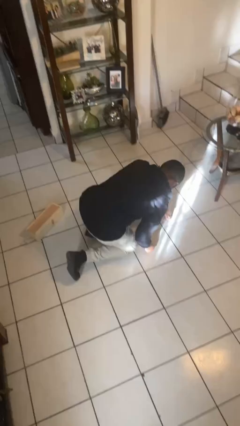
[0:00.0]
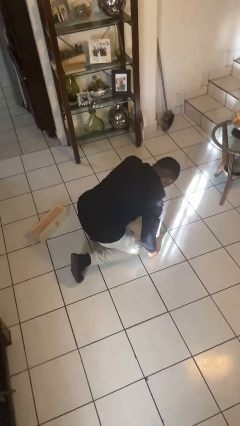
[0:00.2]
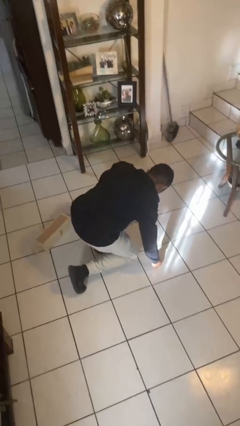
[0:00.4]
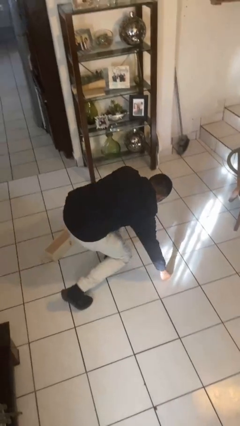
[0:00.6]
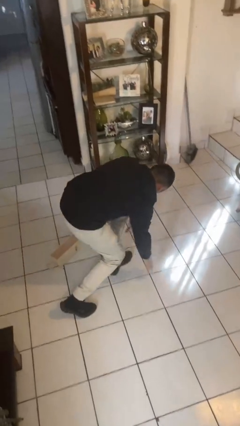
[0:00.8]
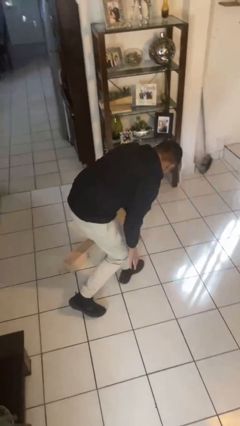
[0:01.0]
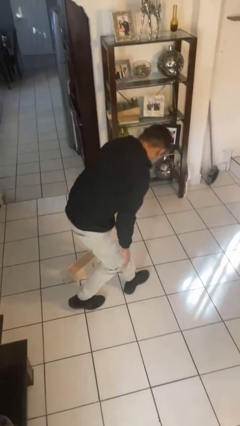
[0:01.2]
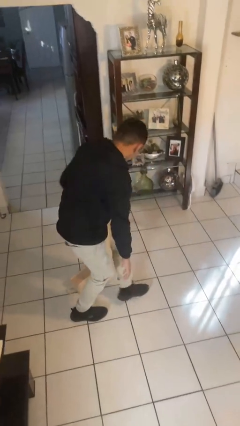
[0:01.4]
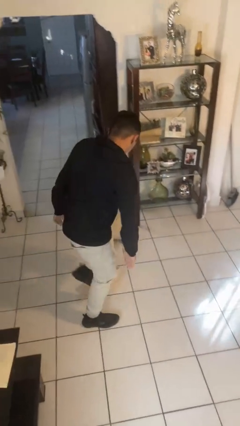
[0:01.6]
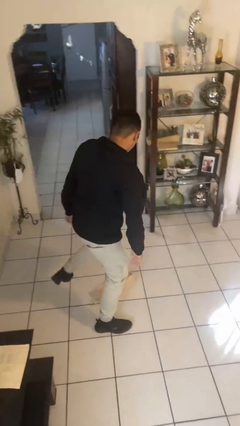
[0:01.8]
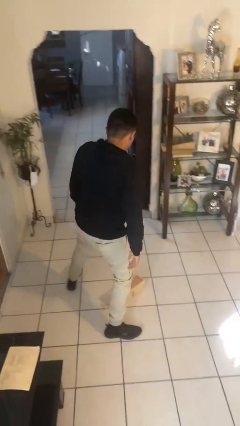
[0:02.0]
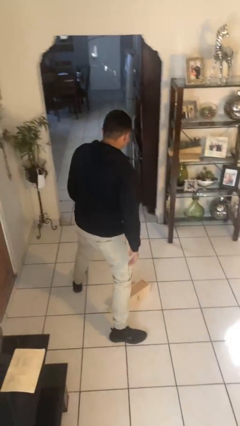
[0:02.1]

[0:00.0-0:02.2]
person stands up from floor

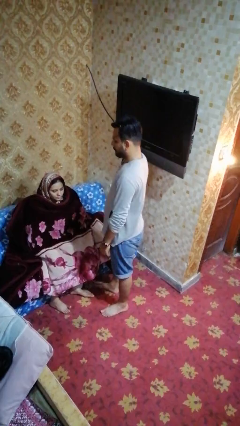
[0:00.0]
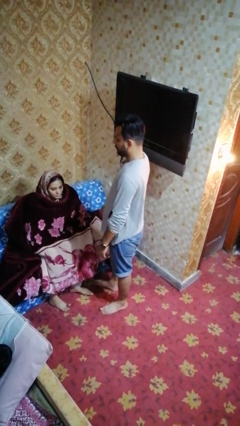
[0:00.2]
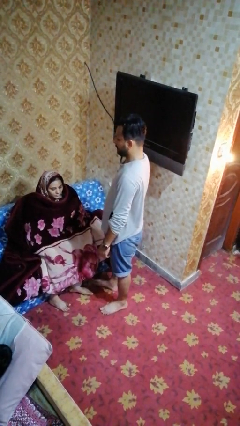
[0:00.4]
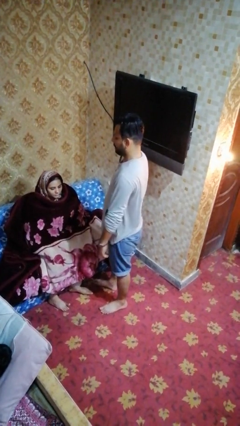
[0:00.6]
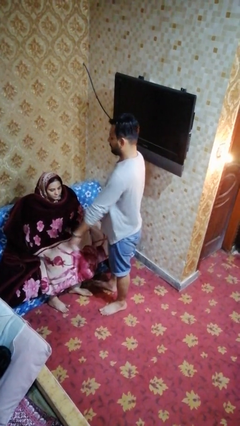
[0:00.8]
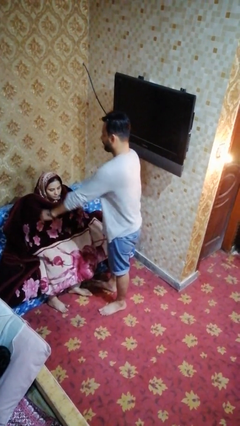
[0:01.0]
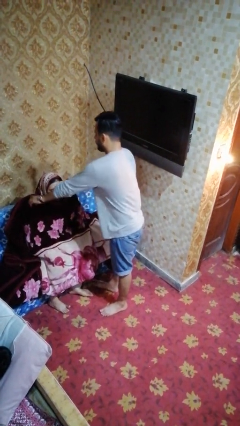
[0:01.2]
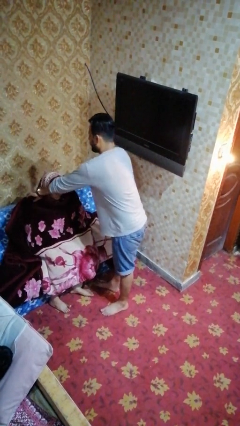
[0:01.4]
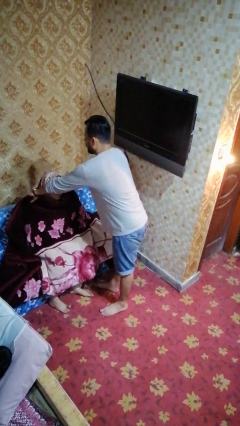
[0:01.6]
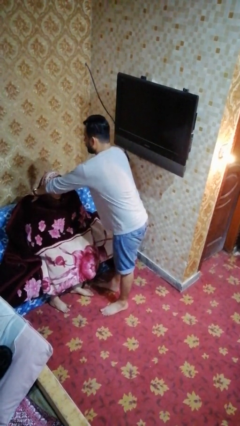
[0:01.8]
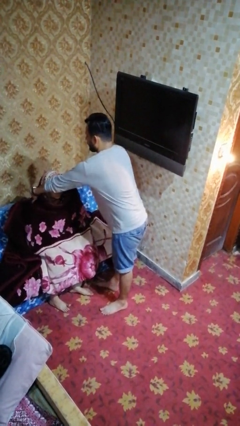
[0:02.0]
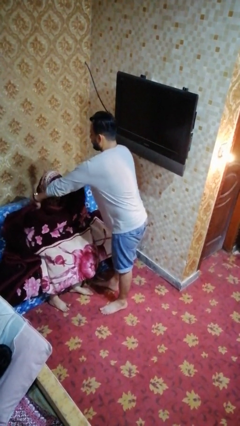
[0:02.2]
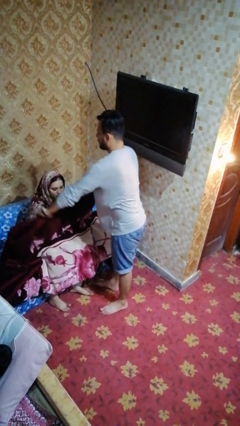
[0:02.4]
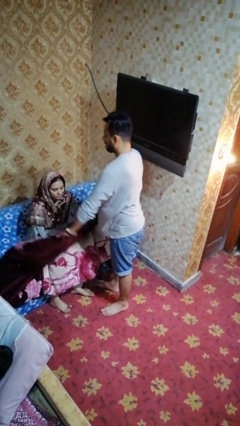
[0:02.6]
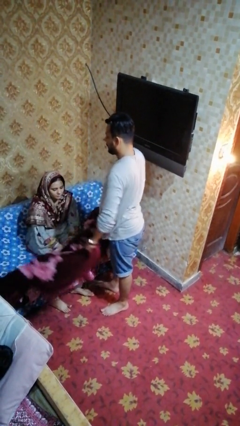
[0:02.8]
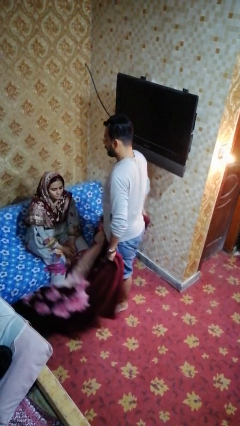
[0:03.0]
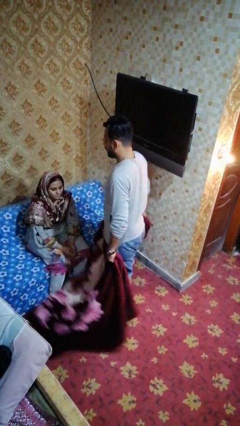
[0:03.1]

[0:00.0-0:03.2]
person uncovers friend with blanket

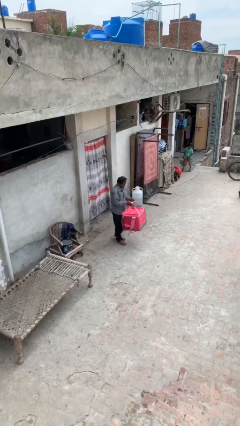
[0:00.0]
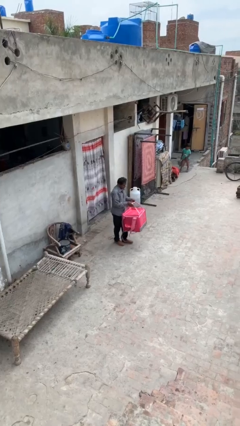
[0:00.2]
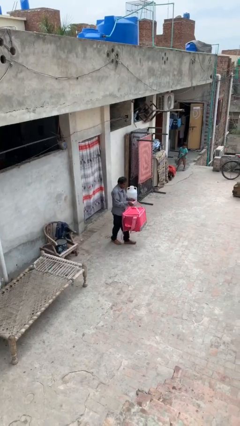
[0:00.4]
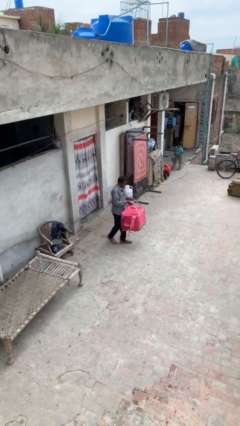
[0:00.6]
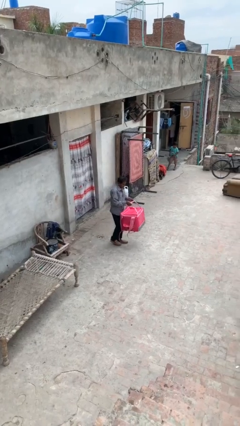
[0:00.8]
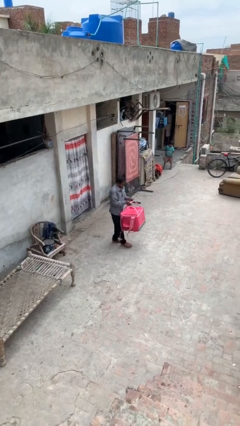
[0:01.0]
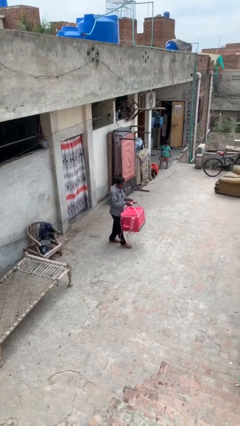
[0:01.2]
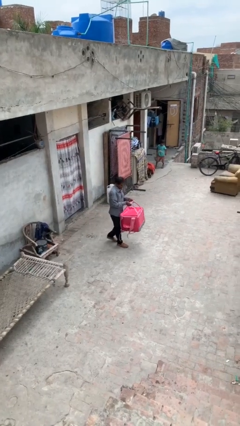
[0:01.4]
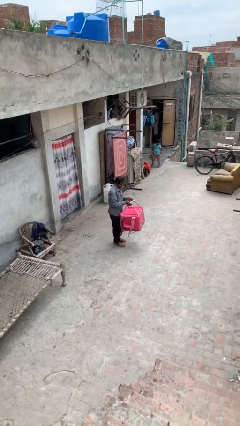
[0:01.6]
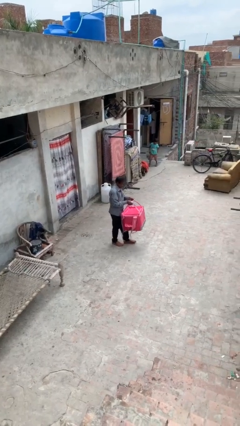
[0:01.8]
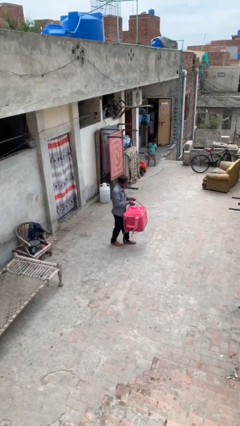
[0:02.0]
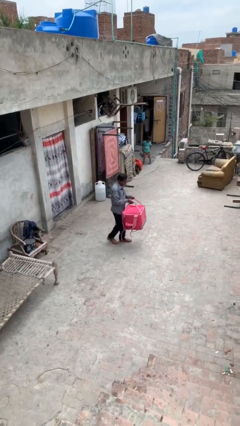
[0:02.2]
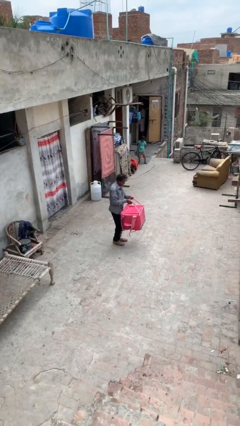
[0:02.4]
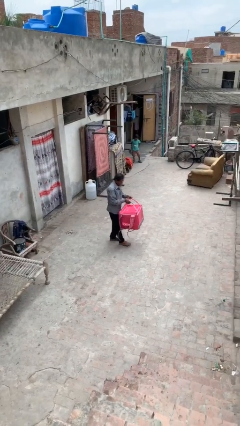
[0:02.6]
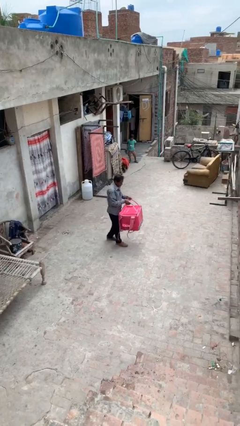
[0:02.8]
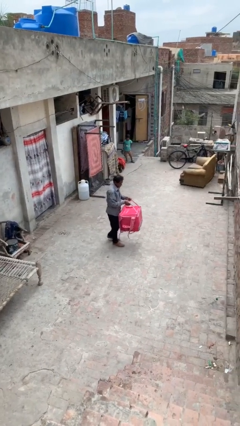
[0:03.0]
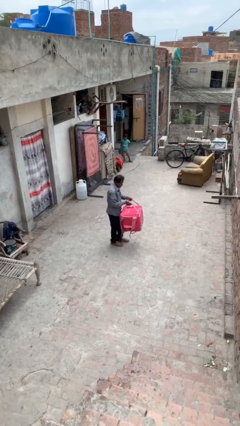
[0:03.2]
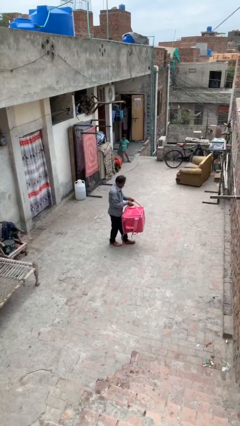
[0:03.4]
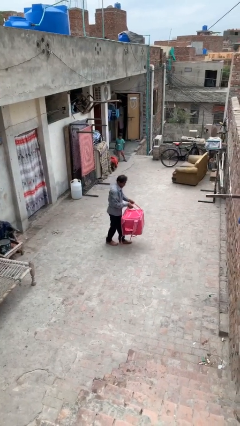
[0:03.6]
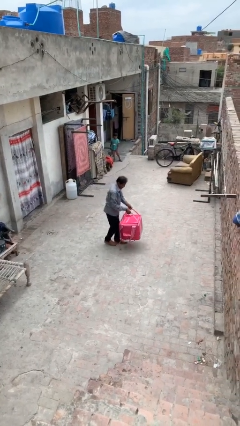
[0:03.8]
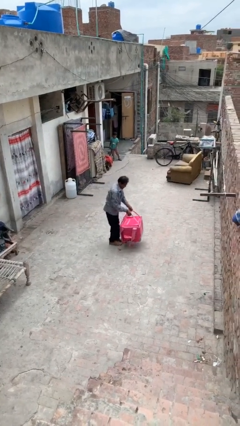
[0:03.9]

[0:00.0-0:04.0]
person carries heavy object

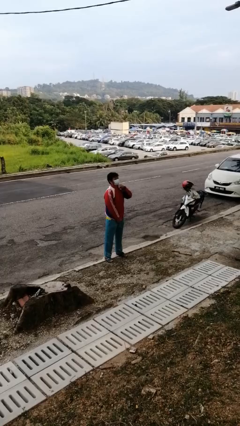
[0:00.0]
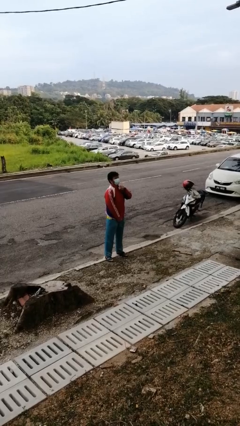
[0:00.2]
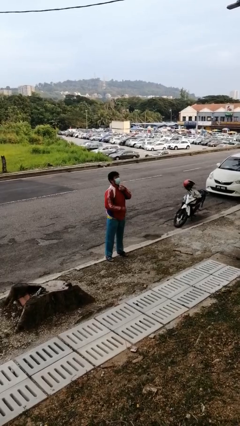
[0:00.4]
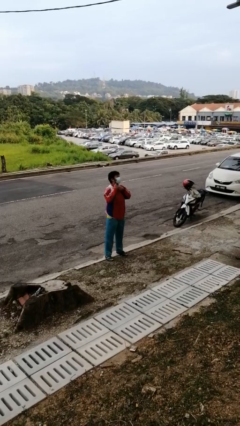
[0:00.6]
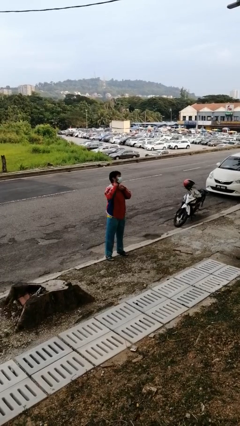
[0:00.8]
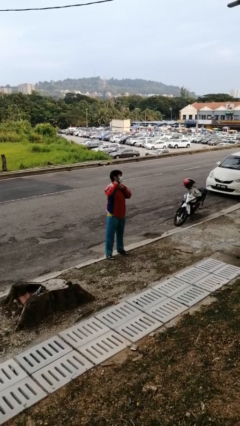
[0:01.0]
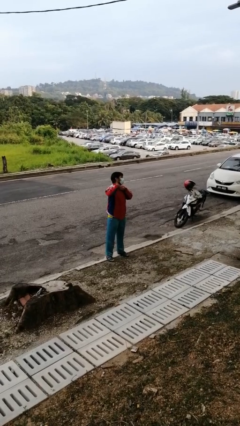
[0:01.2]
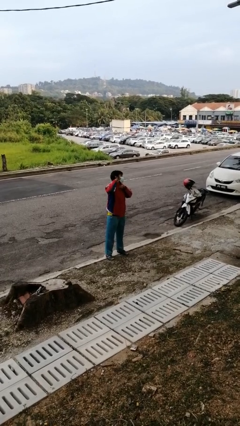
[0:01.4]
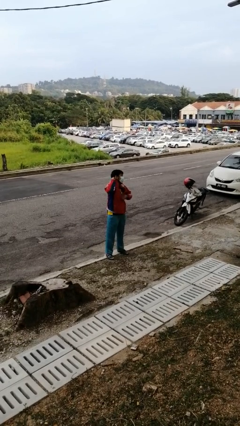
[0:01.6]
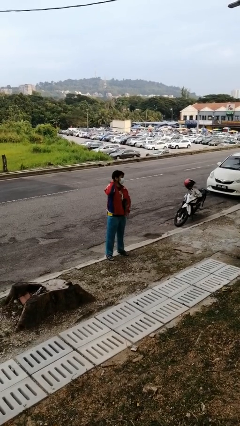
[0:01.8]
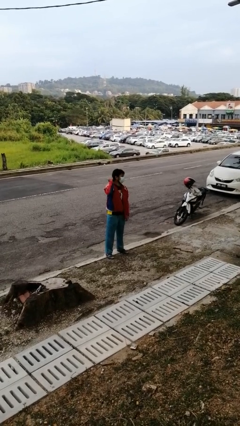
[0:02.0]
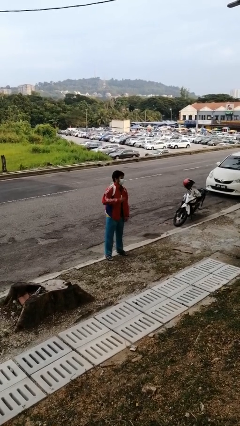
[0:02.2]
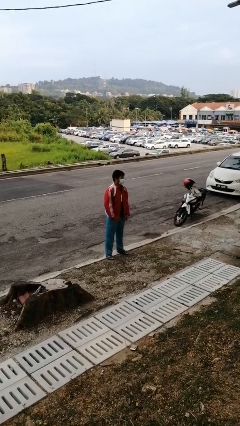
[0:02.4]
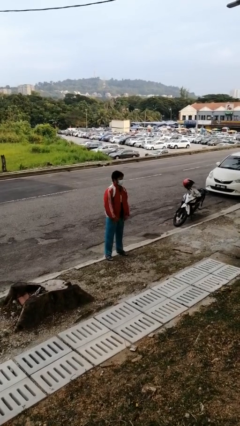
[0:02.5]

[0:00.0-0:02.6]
person unzips jacket

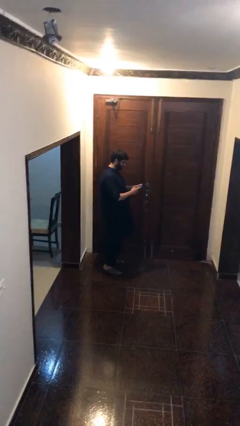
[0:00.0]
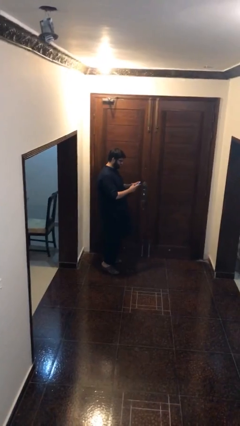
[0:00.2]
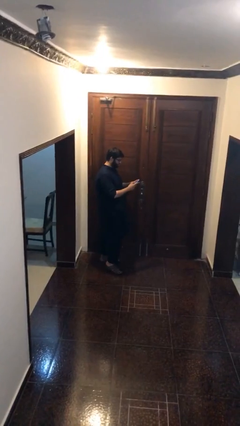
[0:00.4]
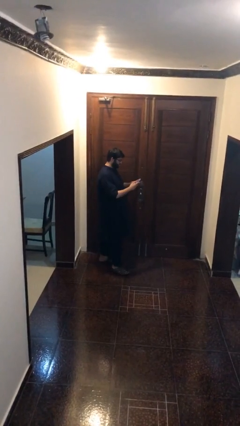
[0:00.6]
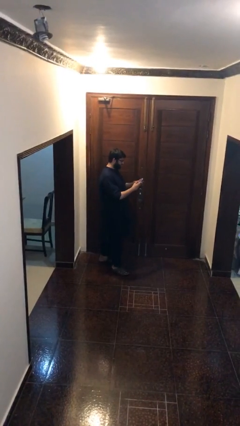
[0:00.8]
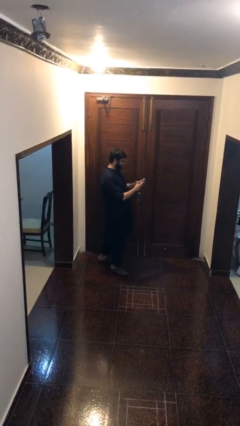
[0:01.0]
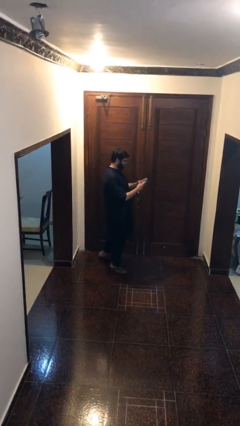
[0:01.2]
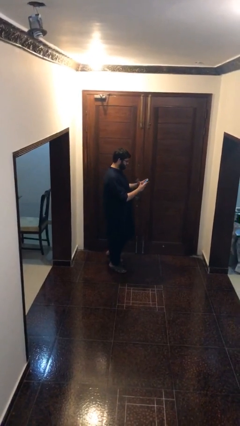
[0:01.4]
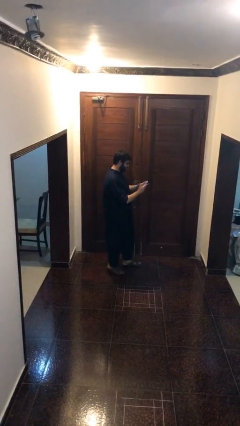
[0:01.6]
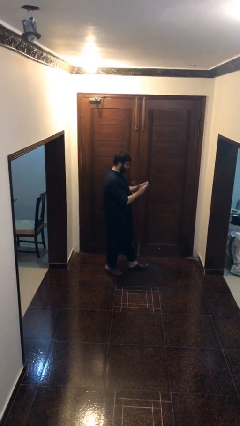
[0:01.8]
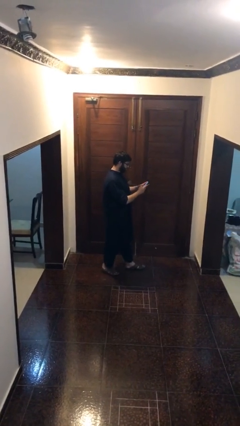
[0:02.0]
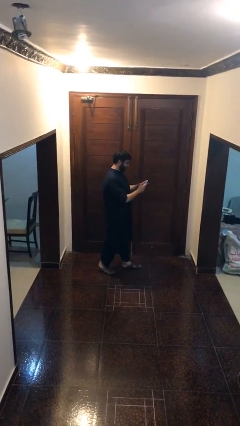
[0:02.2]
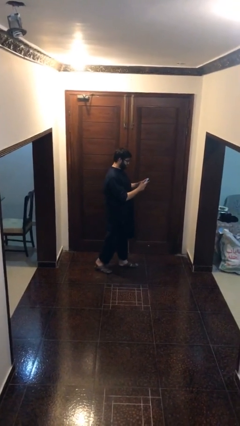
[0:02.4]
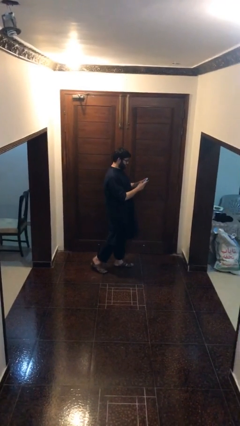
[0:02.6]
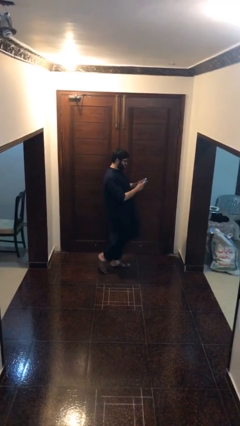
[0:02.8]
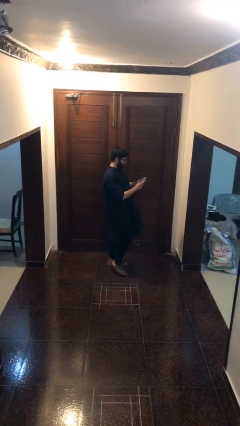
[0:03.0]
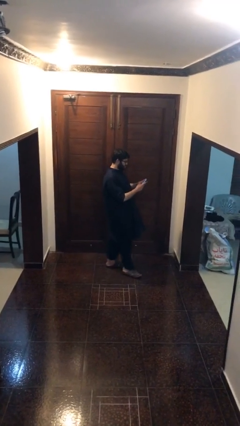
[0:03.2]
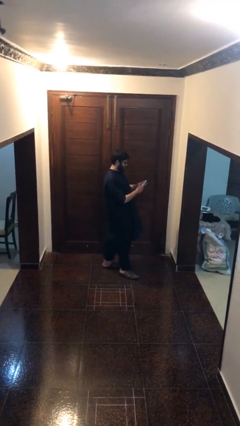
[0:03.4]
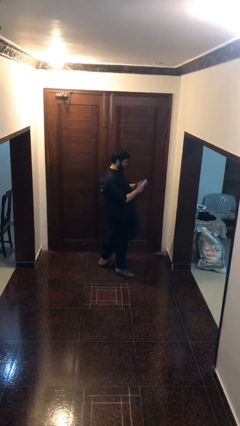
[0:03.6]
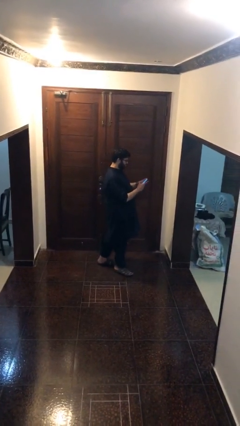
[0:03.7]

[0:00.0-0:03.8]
person texts on phone

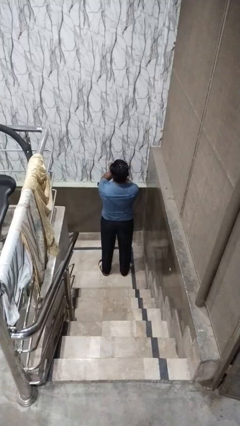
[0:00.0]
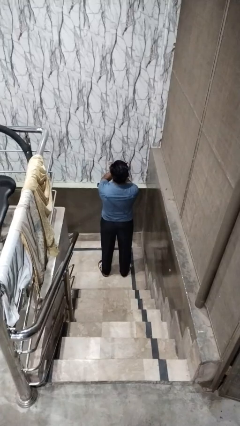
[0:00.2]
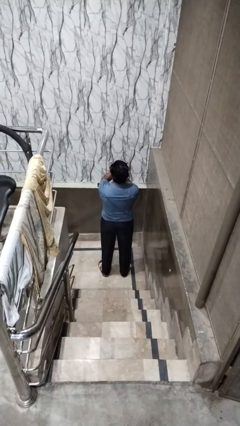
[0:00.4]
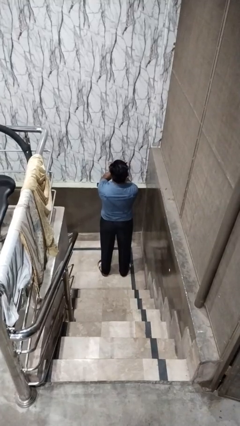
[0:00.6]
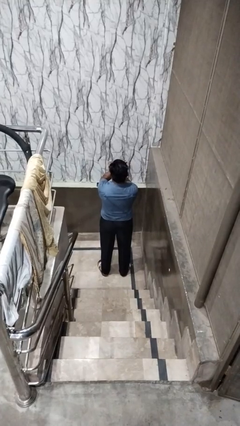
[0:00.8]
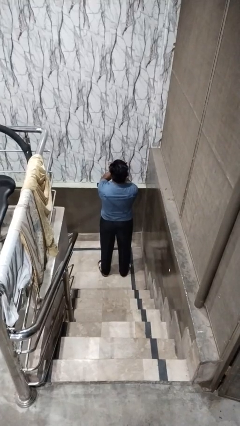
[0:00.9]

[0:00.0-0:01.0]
person gestures arms x

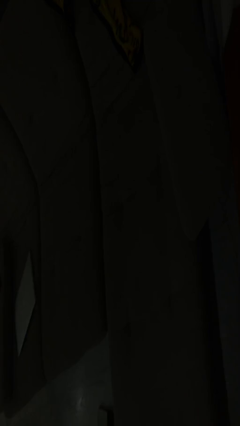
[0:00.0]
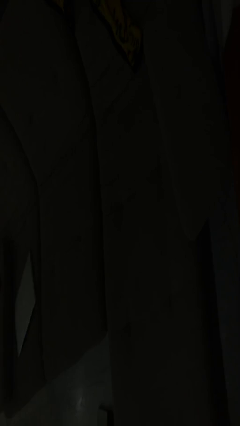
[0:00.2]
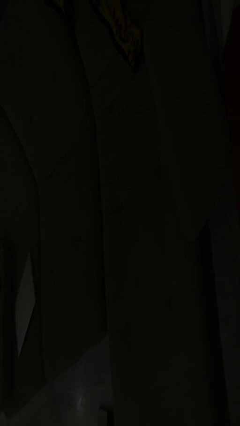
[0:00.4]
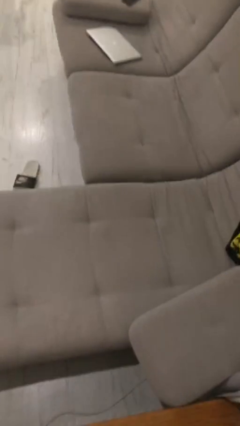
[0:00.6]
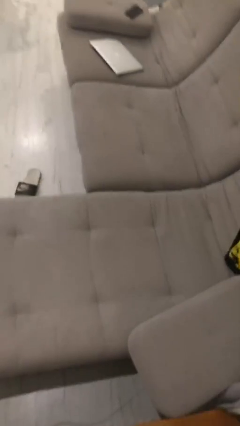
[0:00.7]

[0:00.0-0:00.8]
person puts on sunglasses
